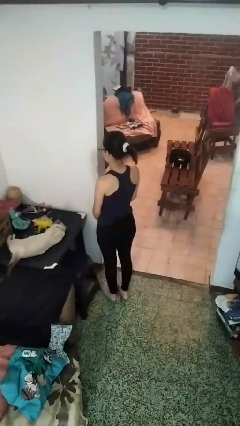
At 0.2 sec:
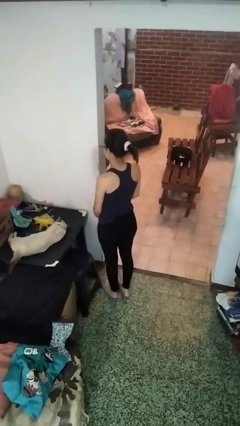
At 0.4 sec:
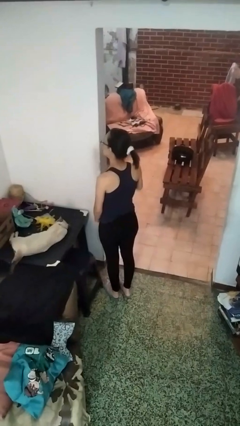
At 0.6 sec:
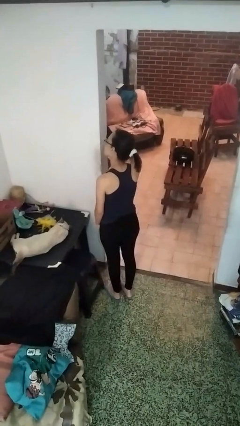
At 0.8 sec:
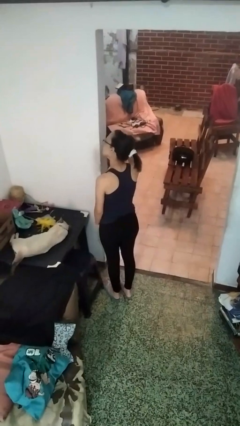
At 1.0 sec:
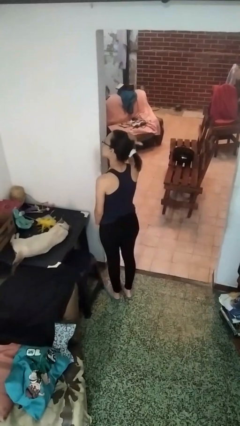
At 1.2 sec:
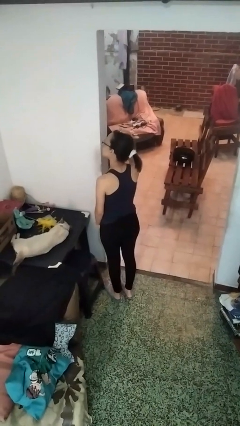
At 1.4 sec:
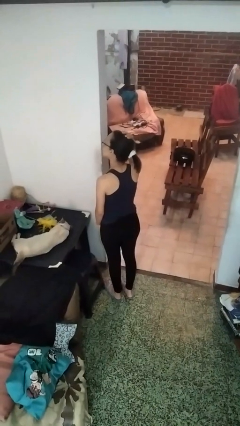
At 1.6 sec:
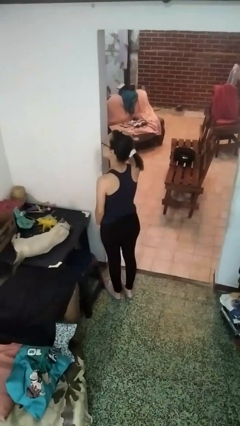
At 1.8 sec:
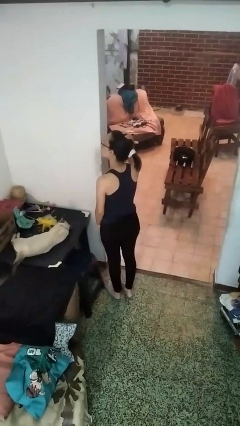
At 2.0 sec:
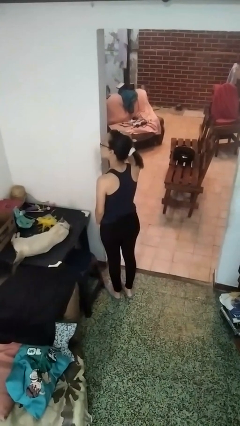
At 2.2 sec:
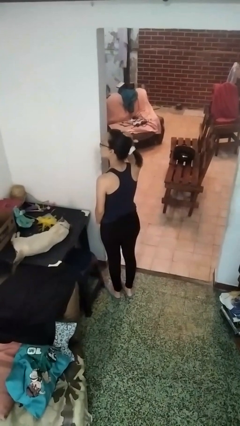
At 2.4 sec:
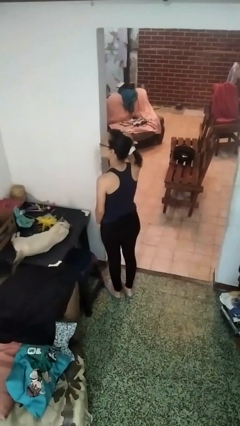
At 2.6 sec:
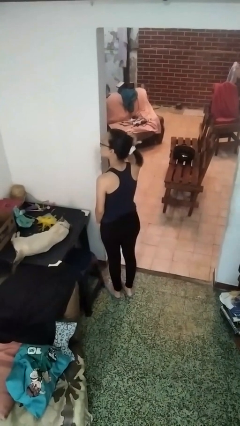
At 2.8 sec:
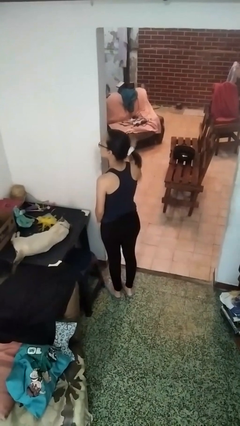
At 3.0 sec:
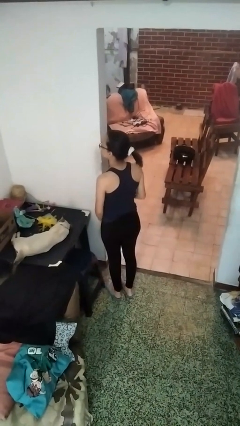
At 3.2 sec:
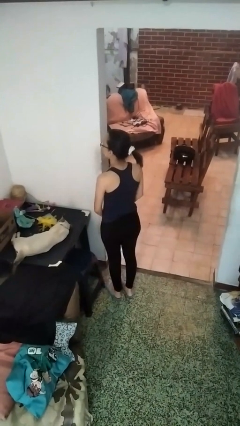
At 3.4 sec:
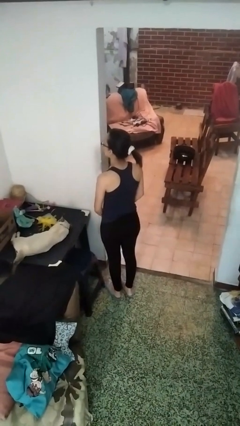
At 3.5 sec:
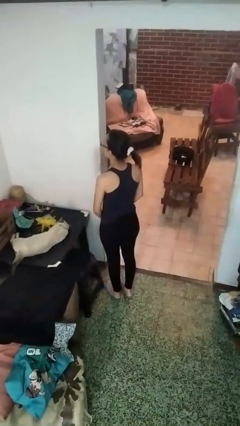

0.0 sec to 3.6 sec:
person pats head

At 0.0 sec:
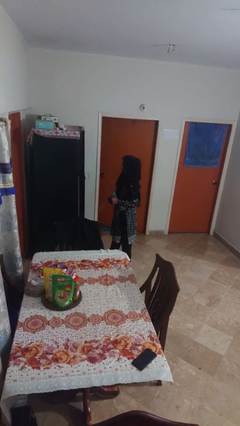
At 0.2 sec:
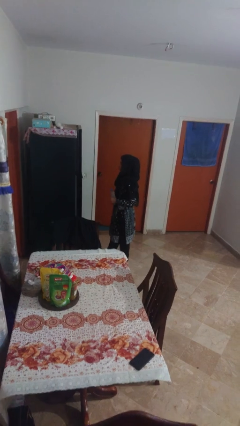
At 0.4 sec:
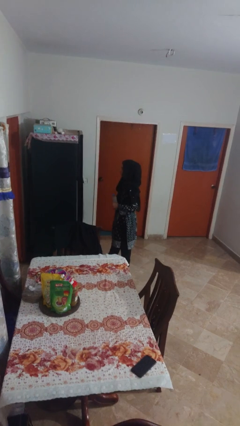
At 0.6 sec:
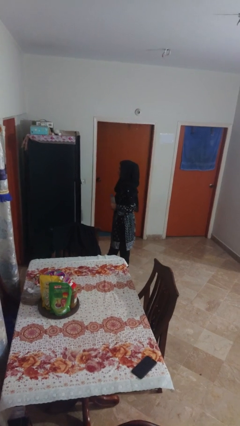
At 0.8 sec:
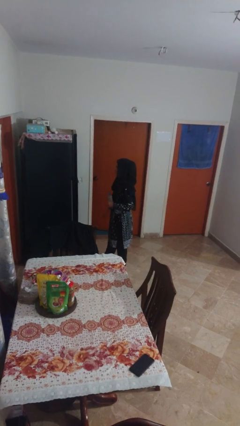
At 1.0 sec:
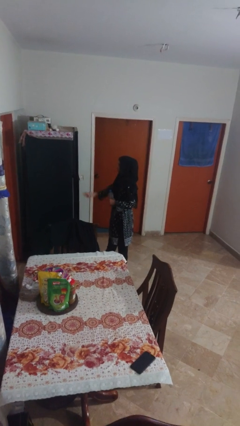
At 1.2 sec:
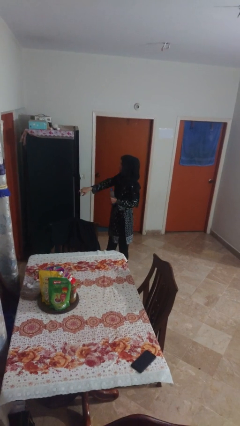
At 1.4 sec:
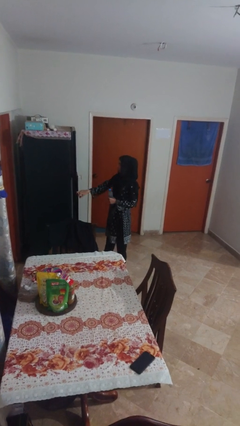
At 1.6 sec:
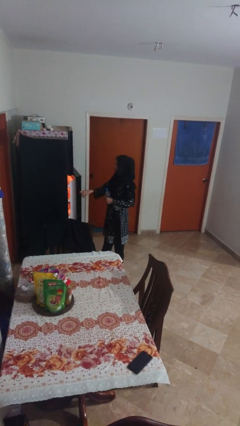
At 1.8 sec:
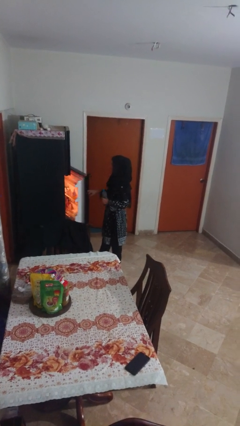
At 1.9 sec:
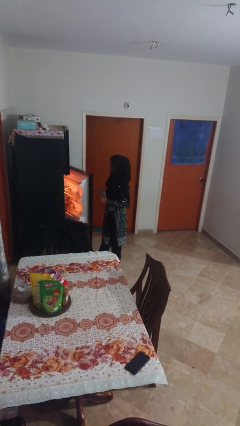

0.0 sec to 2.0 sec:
person opens refrigerator

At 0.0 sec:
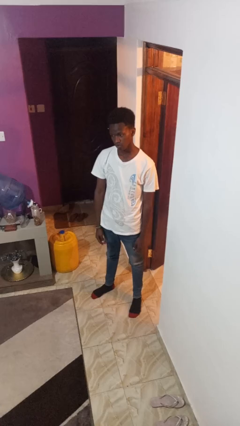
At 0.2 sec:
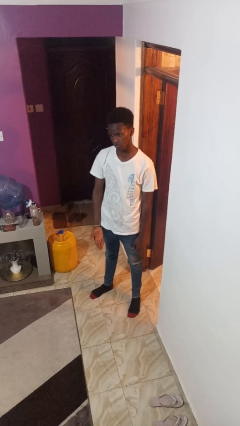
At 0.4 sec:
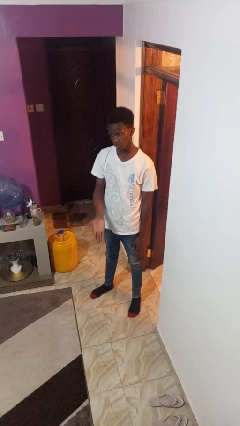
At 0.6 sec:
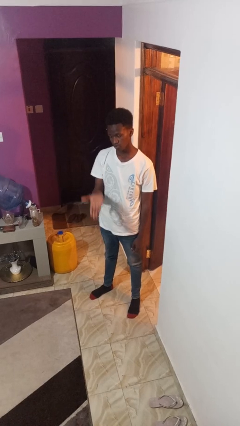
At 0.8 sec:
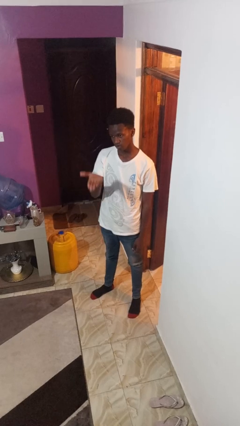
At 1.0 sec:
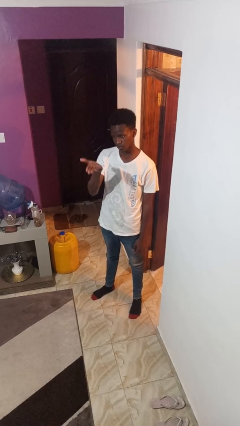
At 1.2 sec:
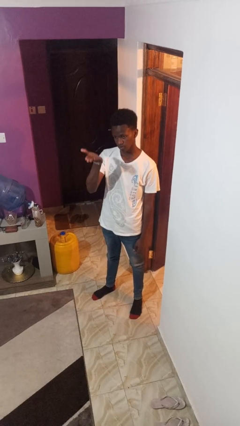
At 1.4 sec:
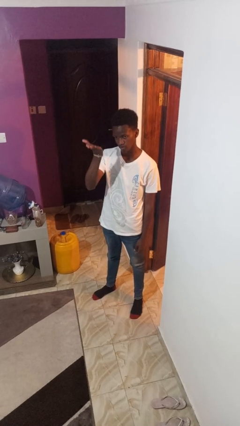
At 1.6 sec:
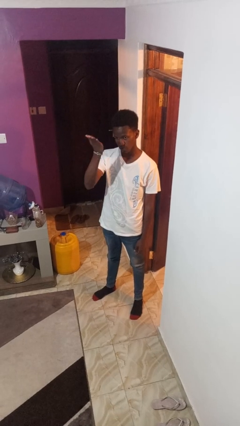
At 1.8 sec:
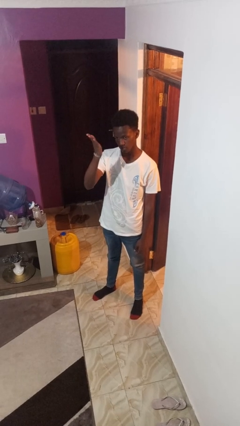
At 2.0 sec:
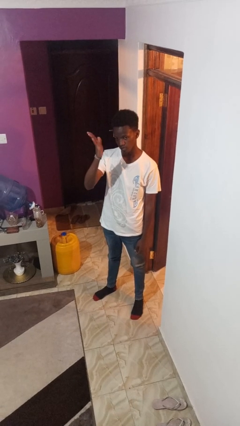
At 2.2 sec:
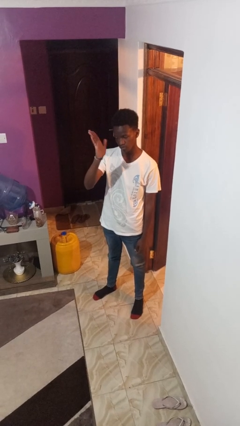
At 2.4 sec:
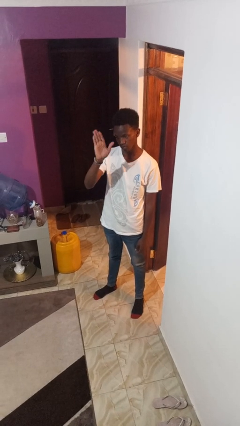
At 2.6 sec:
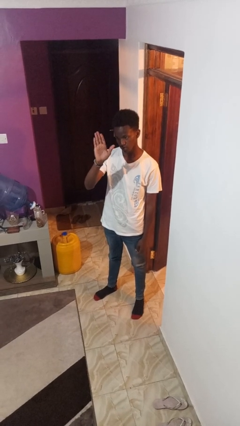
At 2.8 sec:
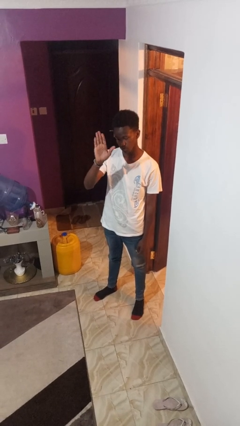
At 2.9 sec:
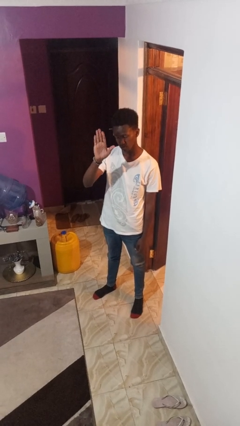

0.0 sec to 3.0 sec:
person gestures swipe up

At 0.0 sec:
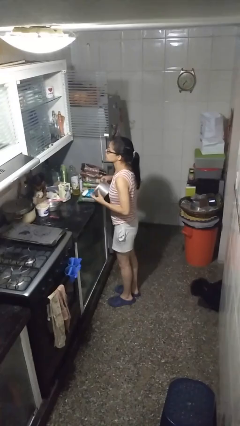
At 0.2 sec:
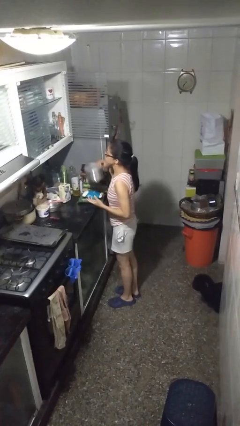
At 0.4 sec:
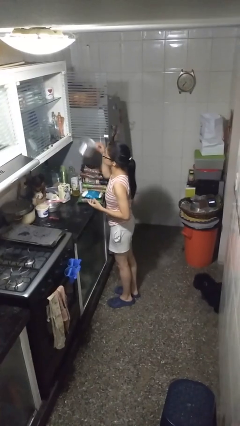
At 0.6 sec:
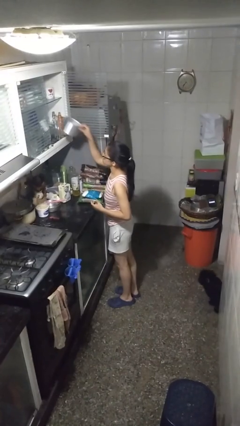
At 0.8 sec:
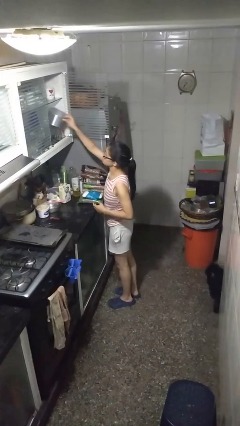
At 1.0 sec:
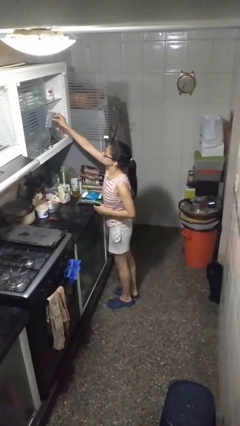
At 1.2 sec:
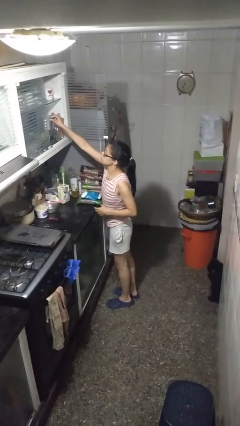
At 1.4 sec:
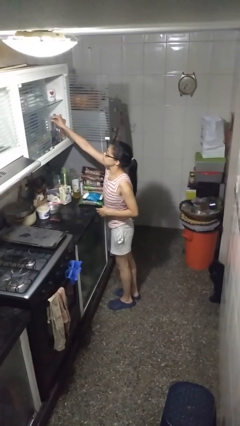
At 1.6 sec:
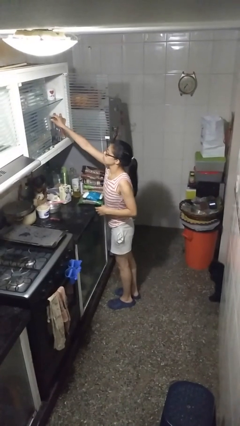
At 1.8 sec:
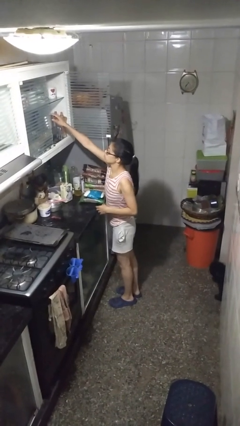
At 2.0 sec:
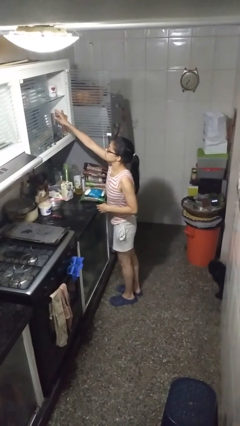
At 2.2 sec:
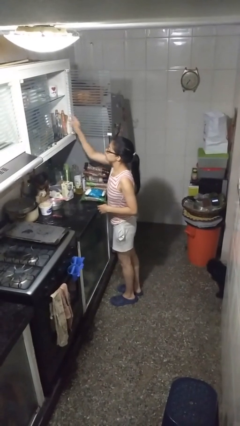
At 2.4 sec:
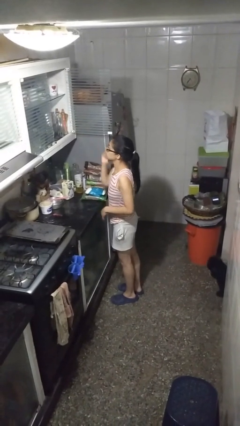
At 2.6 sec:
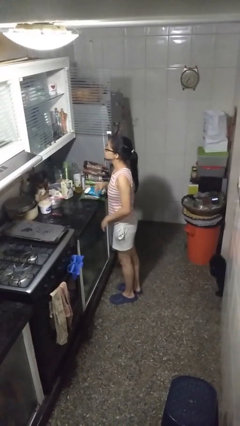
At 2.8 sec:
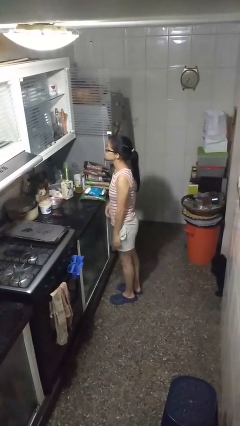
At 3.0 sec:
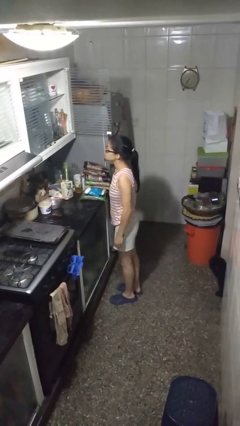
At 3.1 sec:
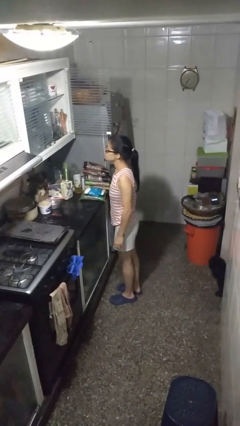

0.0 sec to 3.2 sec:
person puts down object into cabinet

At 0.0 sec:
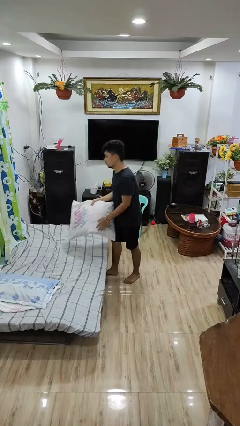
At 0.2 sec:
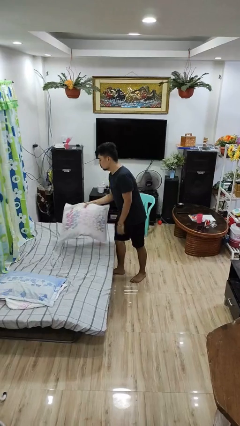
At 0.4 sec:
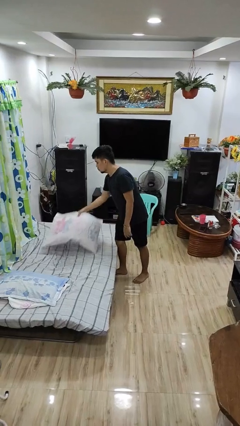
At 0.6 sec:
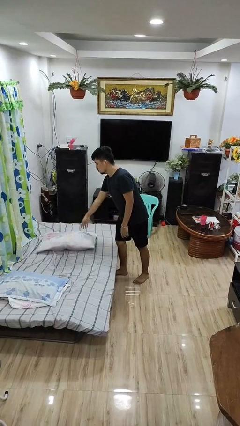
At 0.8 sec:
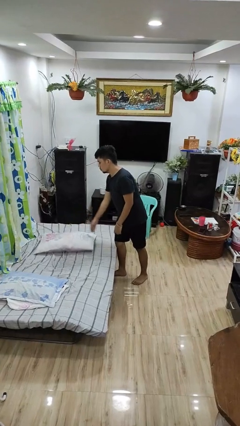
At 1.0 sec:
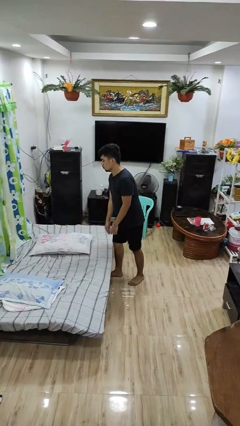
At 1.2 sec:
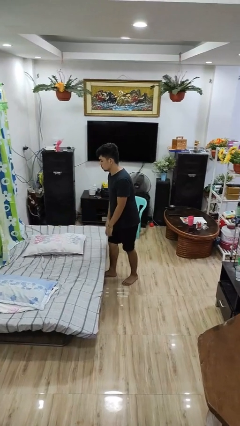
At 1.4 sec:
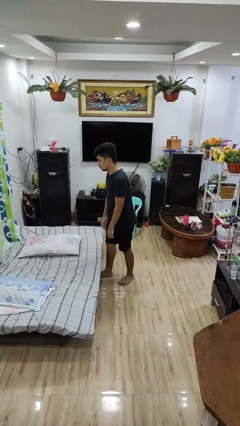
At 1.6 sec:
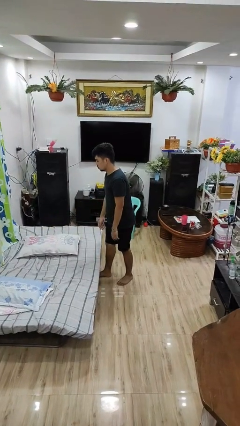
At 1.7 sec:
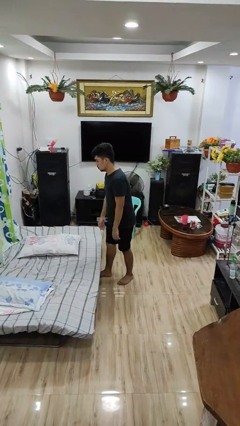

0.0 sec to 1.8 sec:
person puts down object on bed

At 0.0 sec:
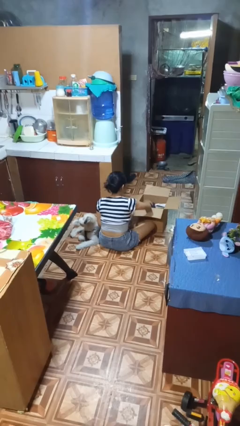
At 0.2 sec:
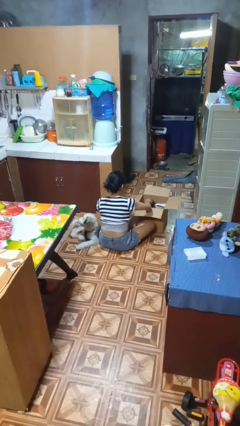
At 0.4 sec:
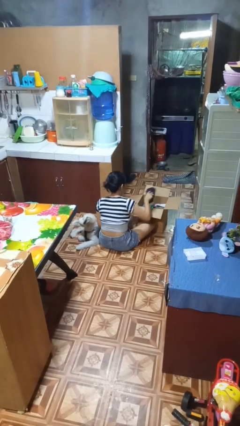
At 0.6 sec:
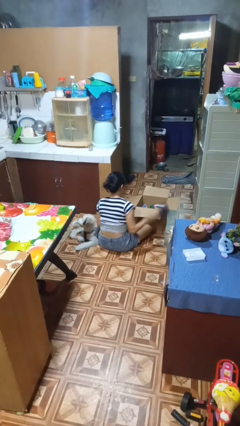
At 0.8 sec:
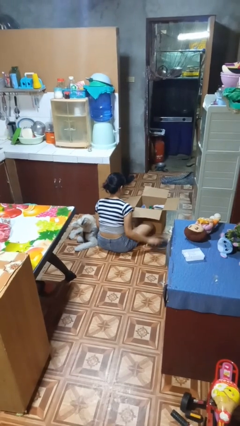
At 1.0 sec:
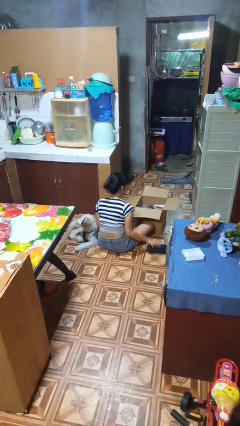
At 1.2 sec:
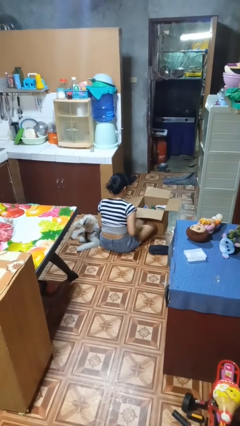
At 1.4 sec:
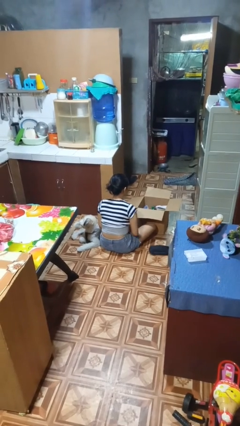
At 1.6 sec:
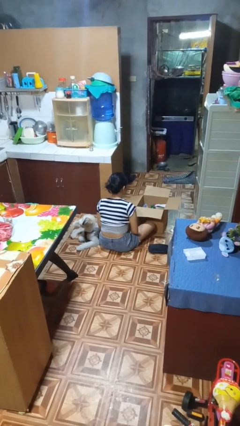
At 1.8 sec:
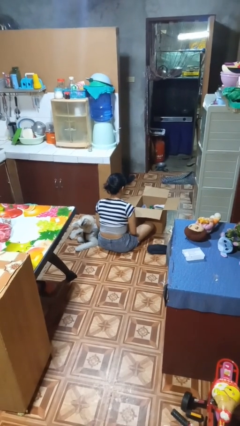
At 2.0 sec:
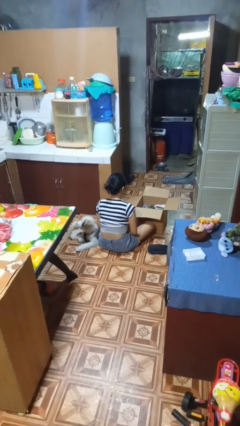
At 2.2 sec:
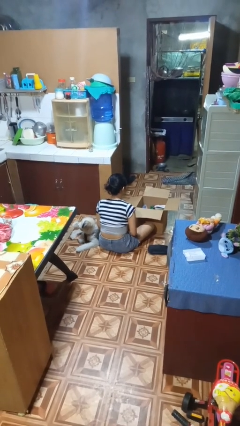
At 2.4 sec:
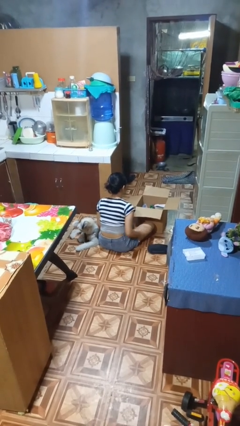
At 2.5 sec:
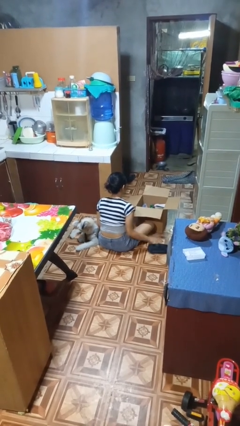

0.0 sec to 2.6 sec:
person takes object from box

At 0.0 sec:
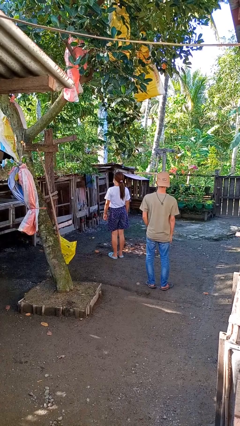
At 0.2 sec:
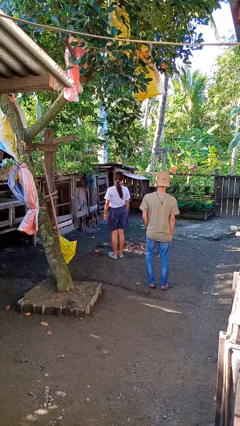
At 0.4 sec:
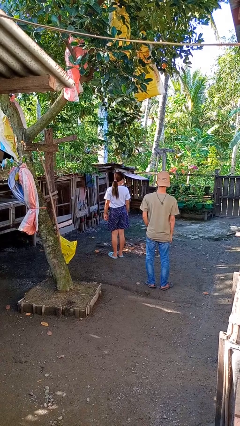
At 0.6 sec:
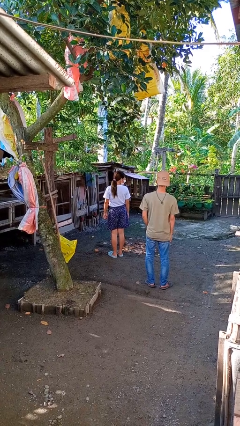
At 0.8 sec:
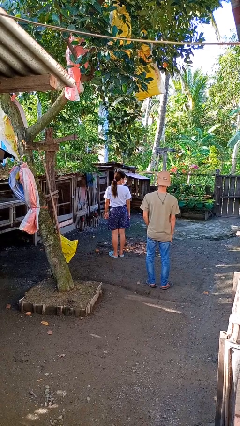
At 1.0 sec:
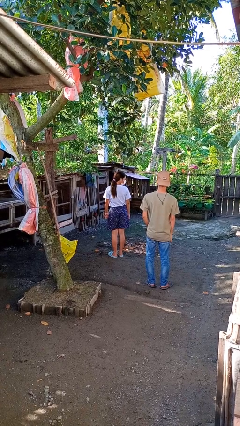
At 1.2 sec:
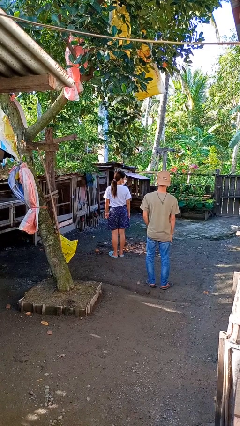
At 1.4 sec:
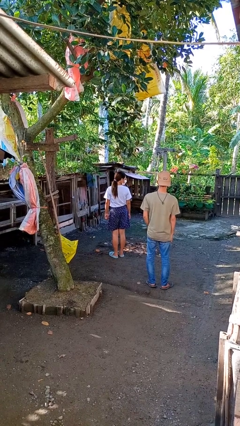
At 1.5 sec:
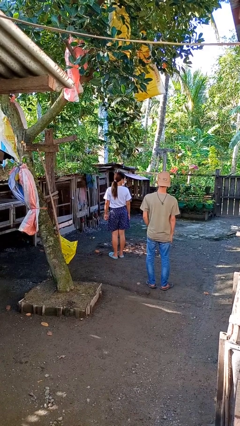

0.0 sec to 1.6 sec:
person looks over shoulder
